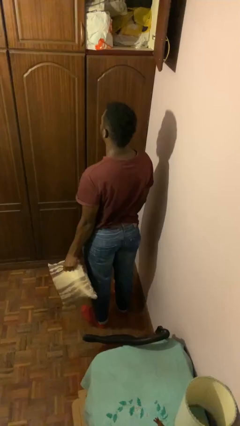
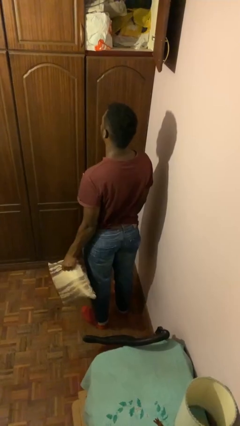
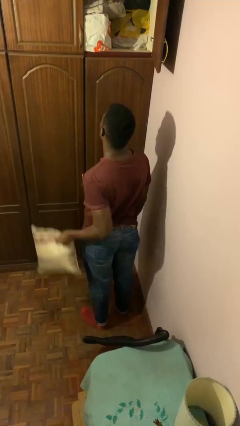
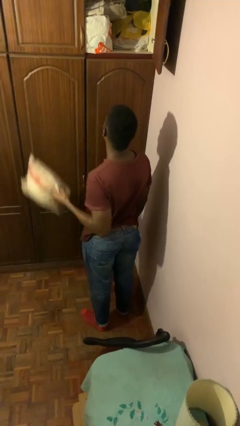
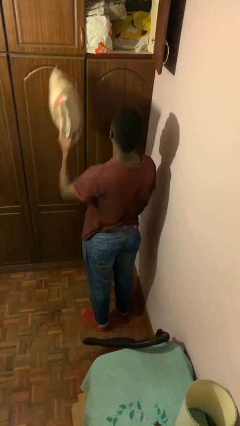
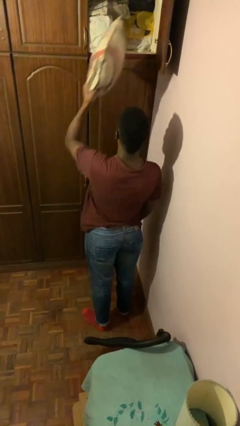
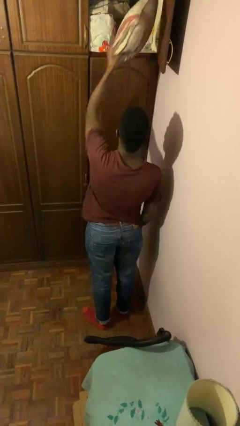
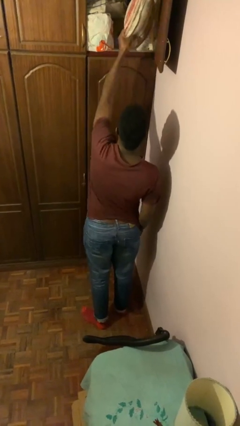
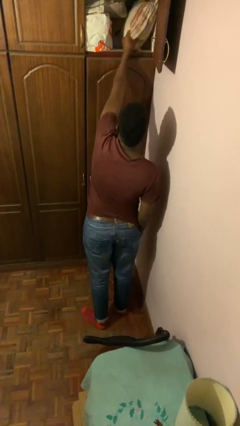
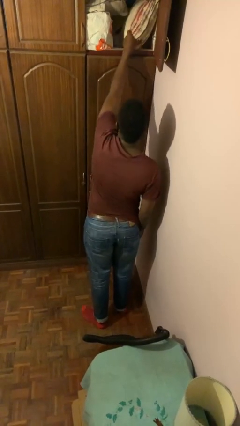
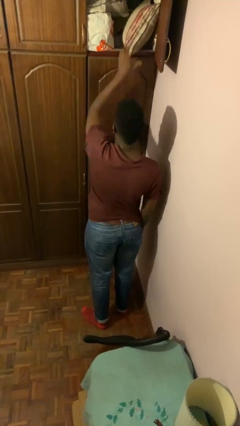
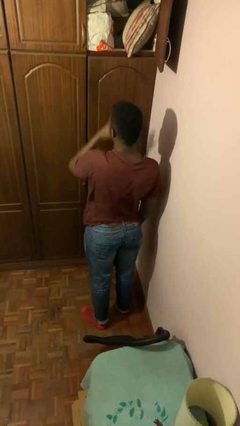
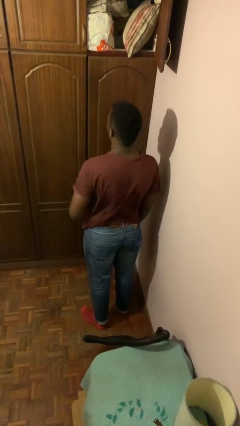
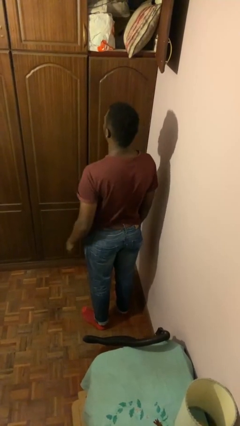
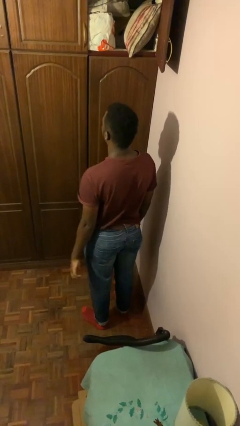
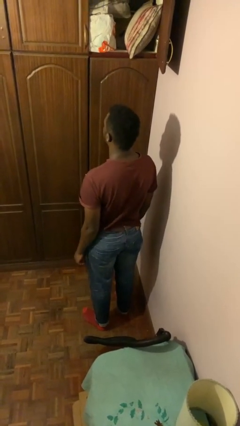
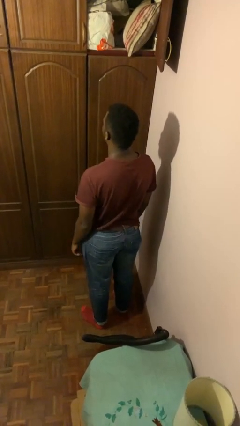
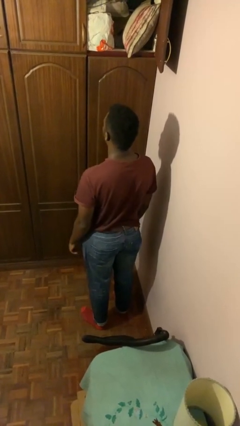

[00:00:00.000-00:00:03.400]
person puts down object on shelf

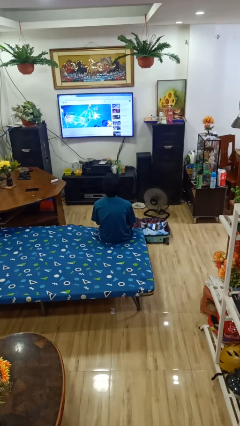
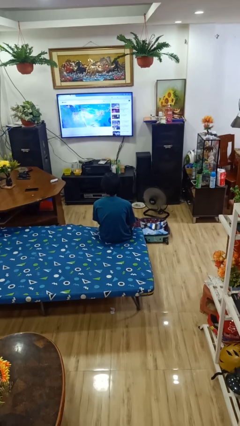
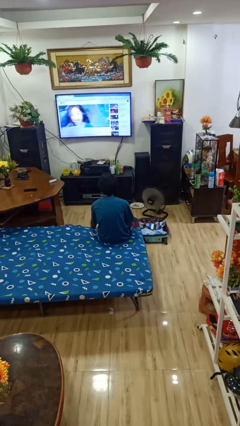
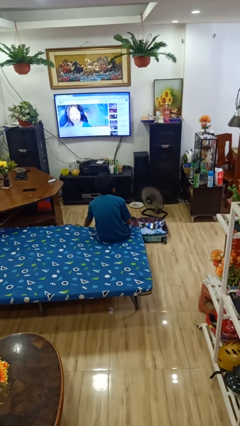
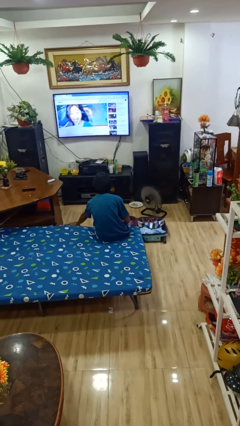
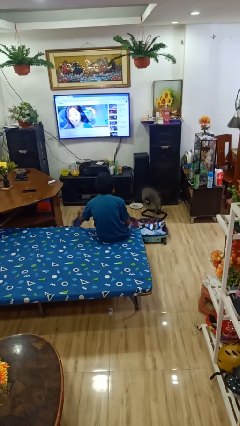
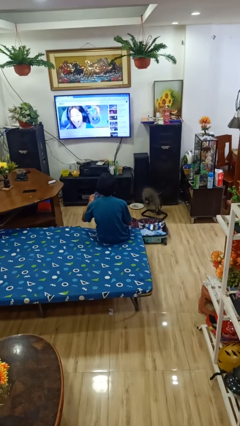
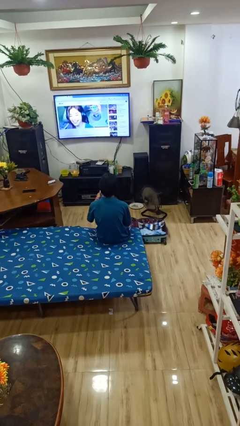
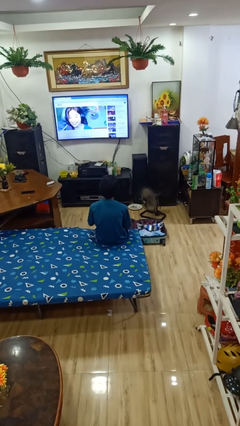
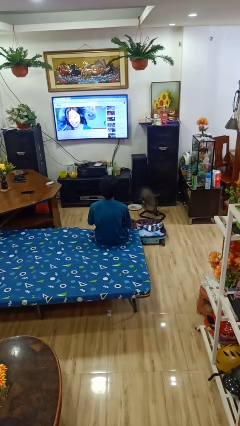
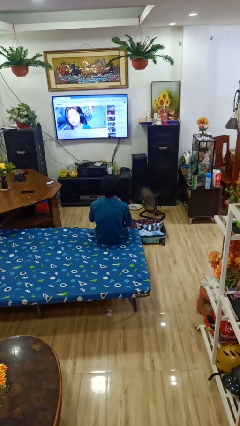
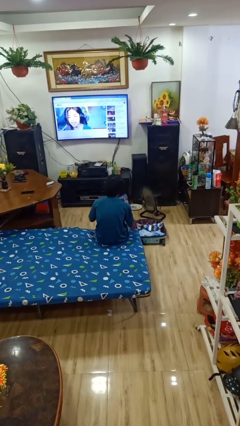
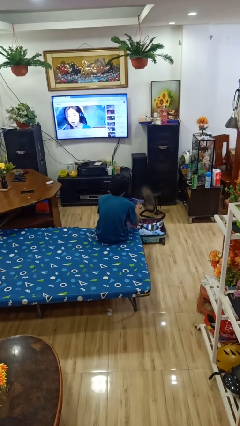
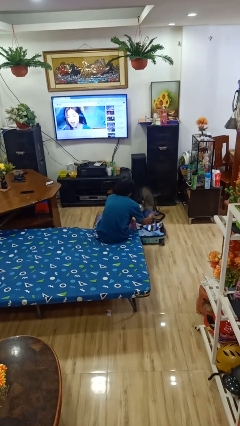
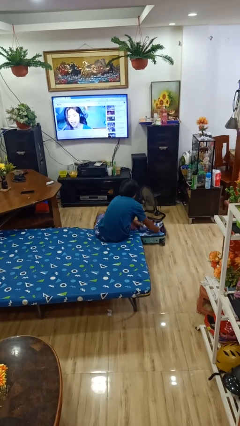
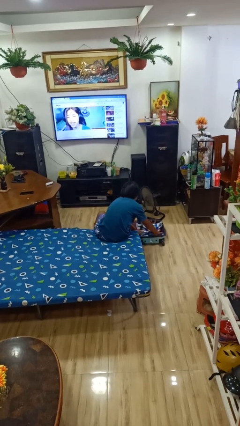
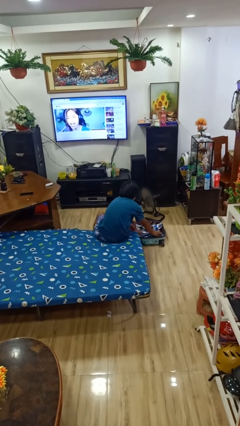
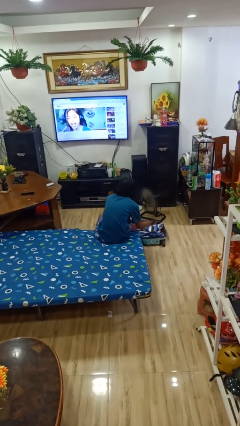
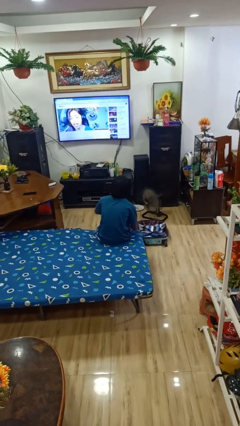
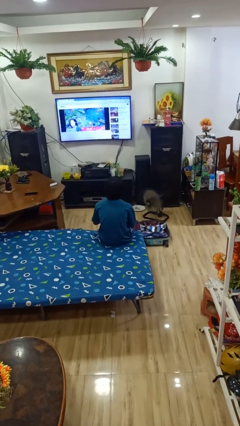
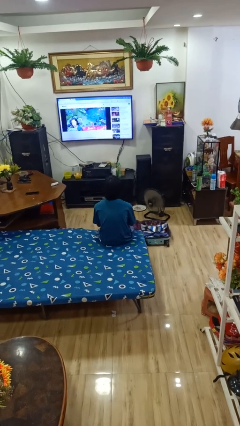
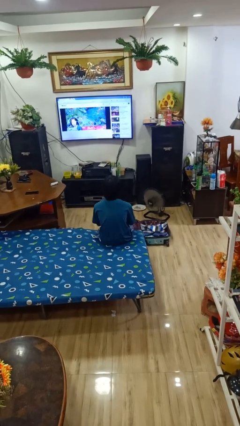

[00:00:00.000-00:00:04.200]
person loads clothes into suitcase

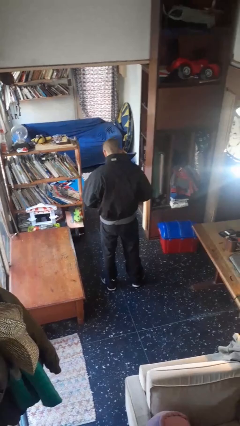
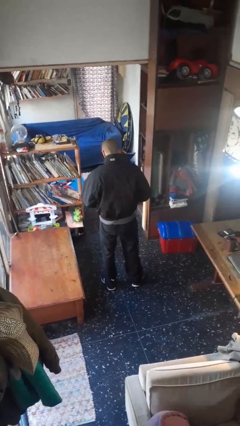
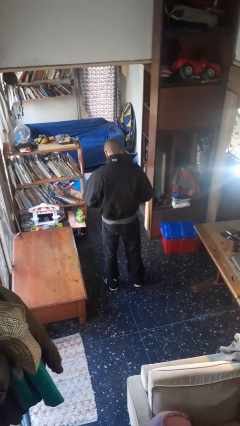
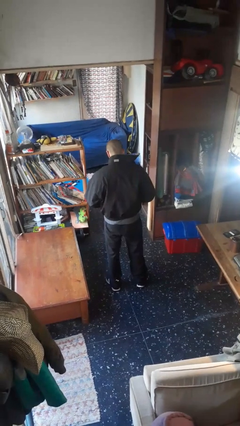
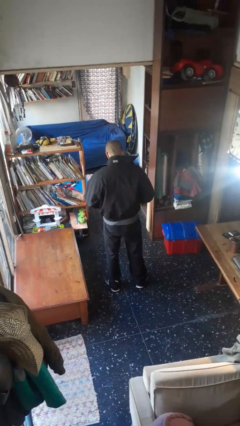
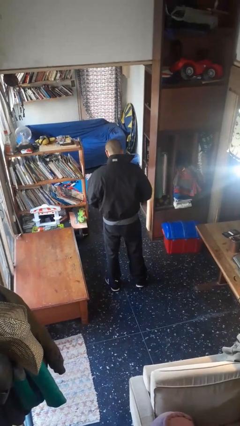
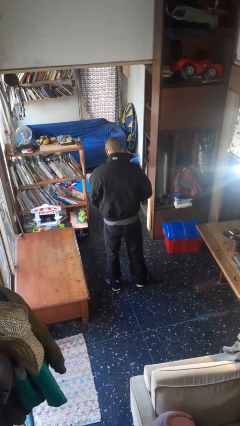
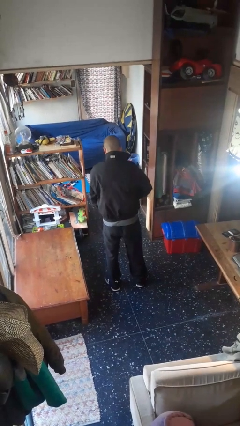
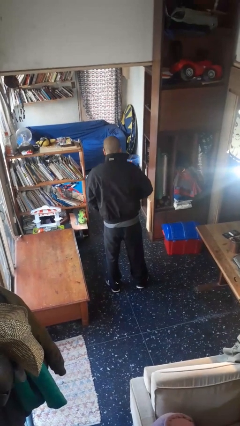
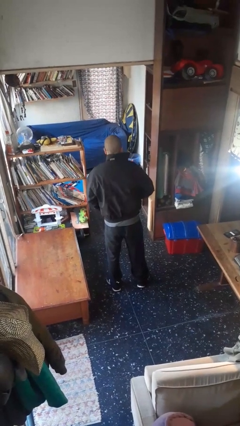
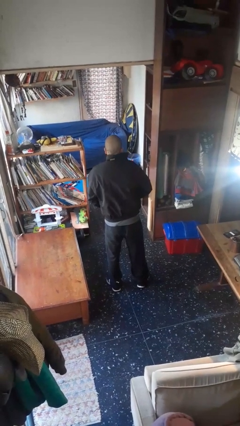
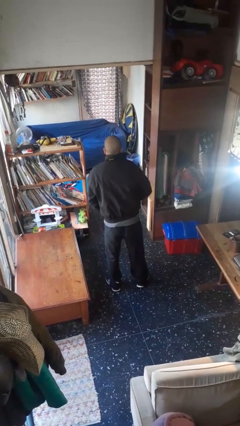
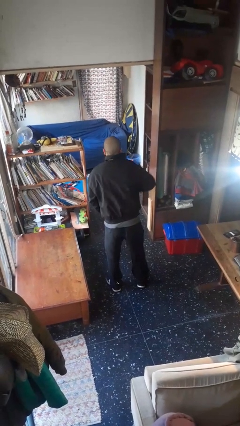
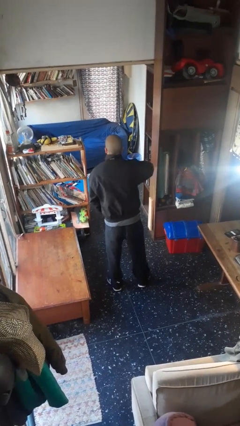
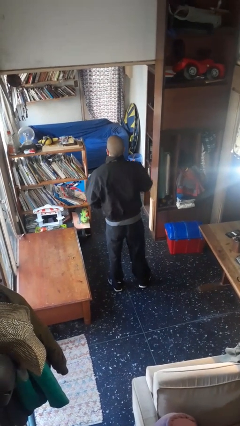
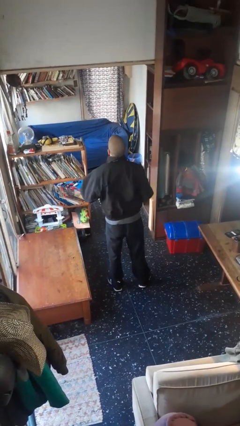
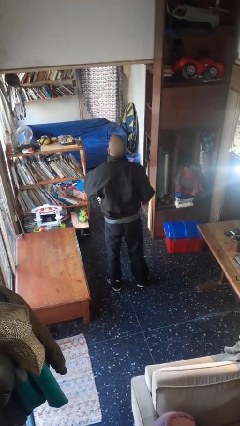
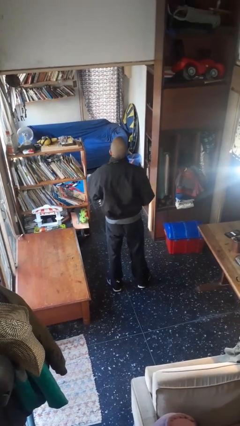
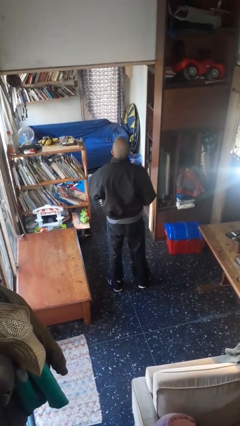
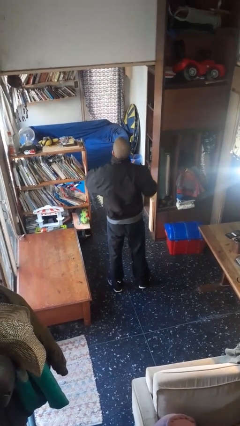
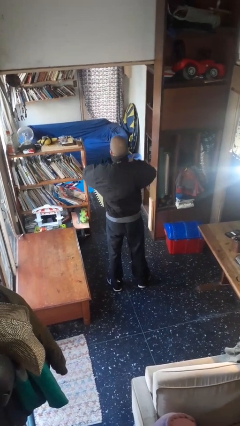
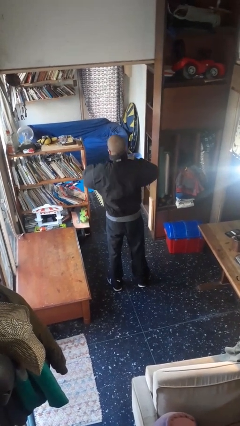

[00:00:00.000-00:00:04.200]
person zips up jacket

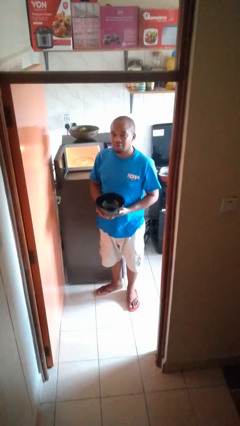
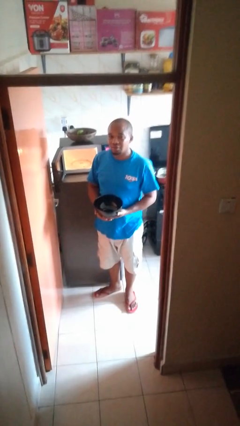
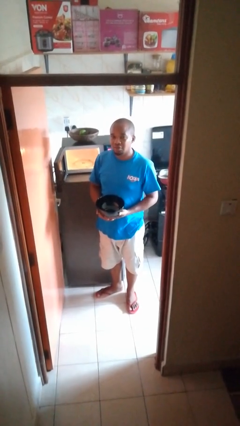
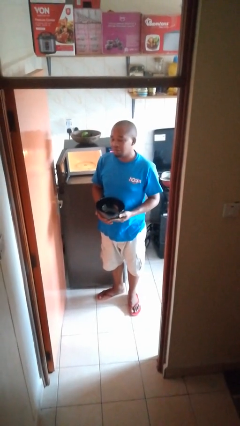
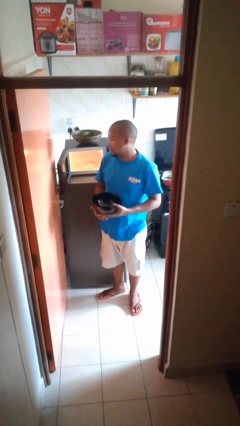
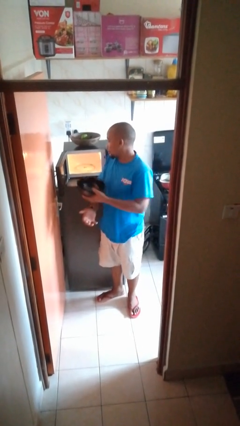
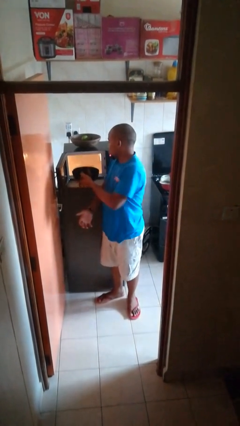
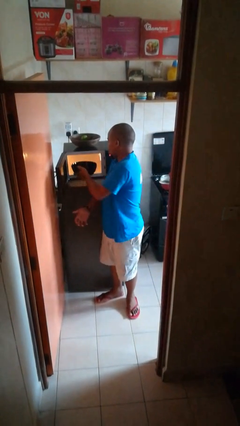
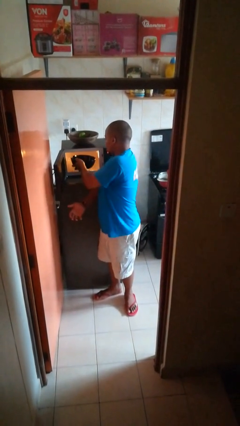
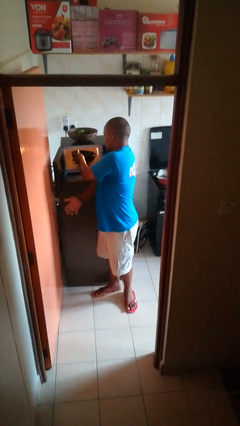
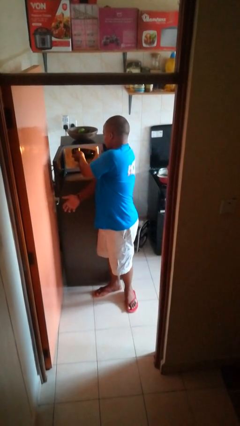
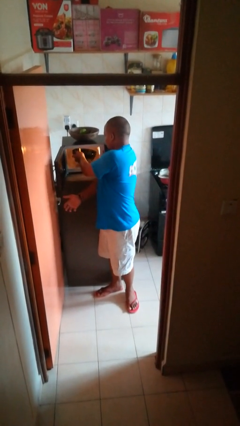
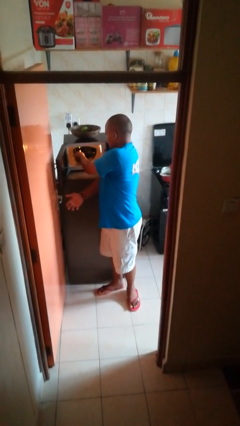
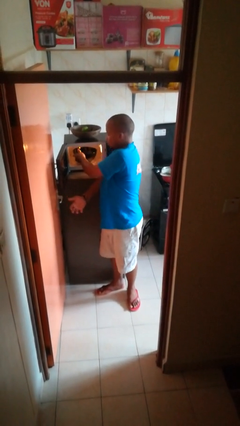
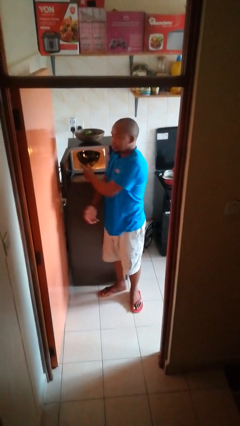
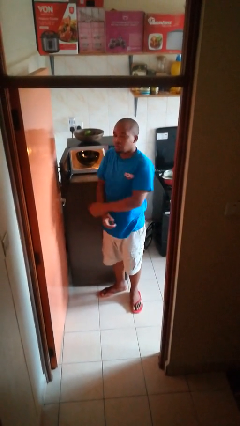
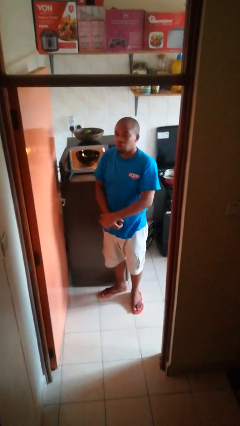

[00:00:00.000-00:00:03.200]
person puts object into microwave

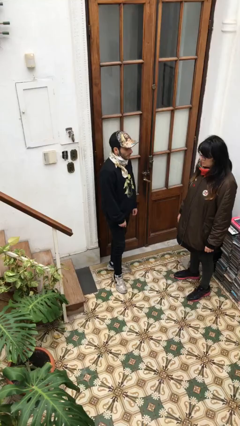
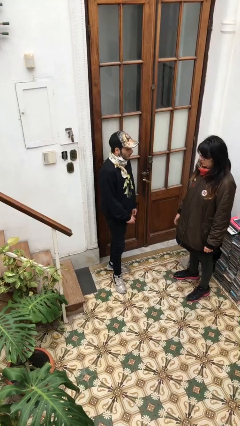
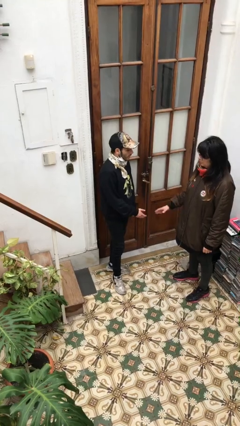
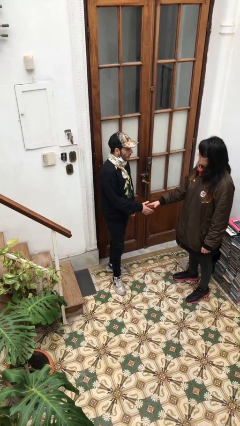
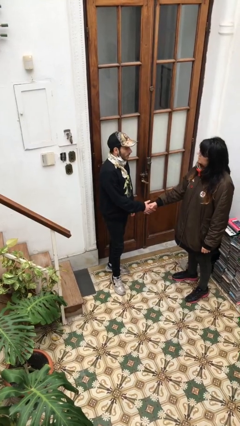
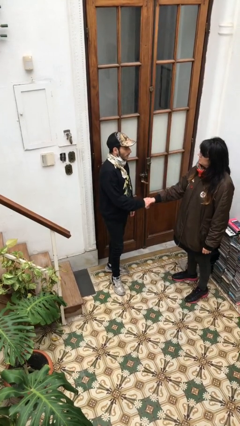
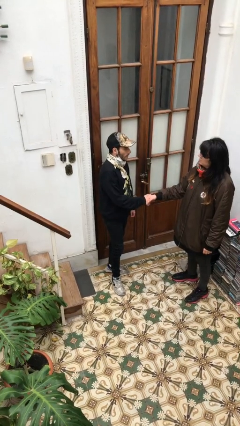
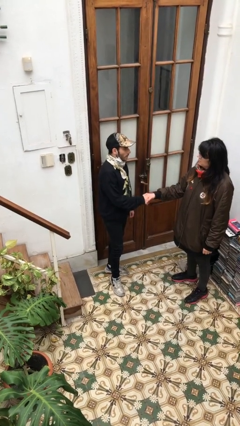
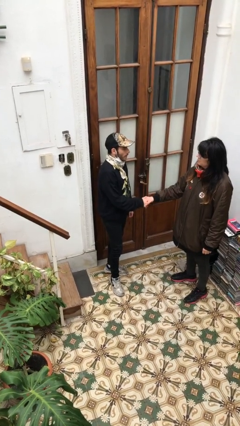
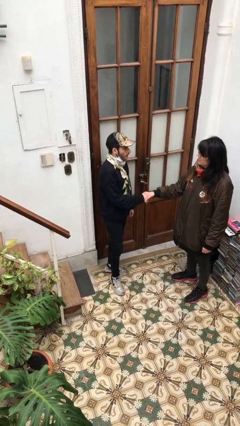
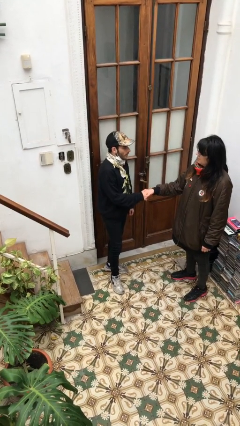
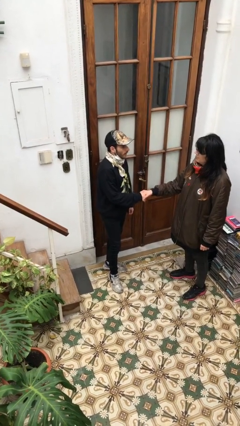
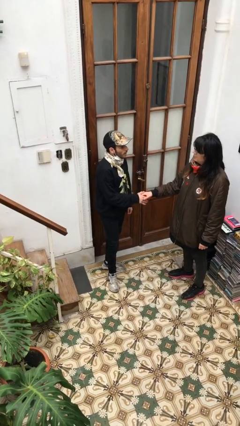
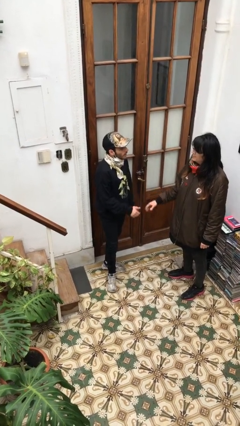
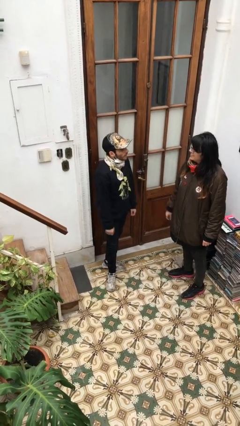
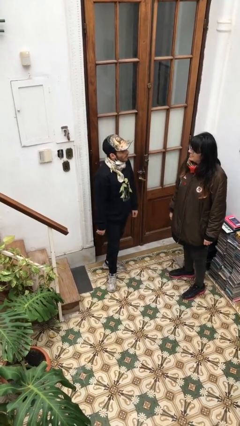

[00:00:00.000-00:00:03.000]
person shakes hand

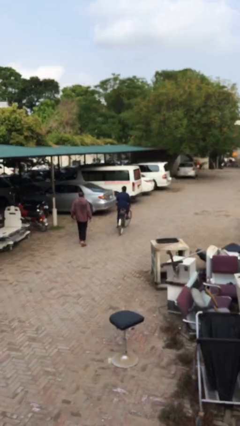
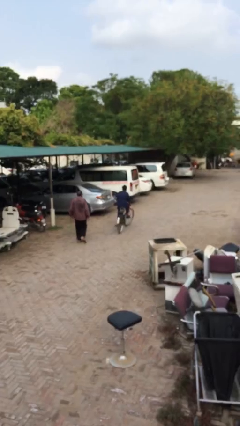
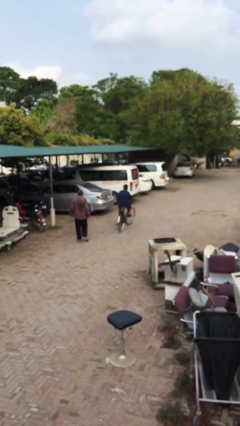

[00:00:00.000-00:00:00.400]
person rides bicycle
